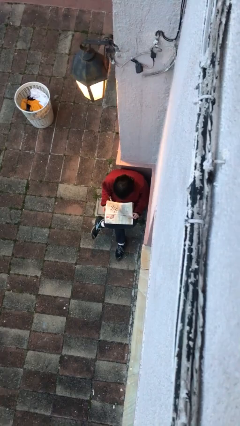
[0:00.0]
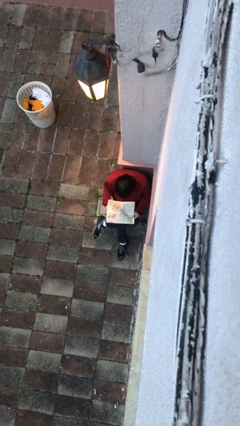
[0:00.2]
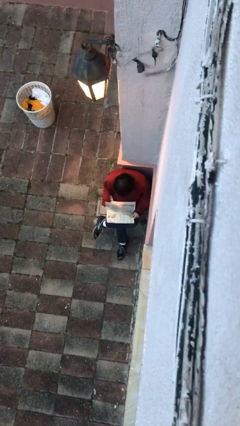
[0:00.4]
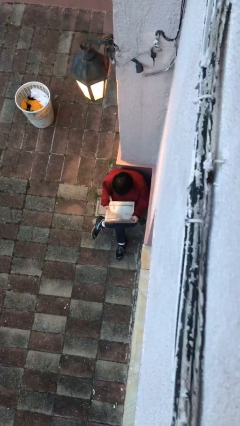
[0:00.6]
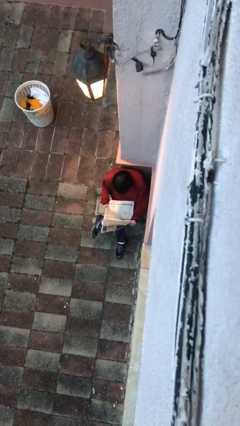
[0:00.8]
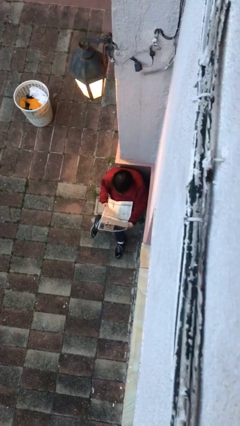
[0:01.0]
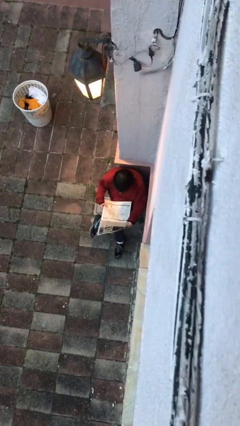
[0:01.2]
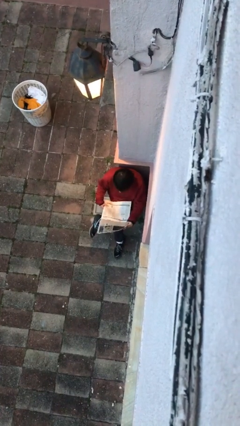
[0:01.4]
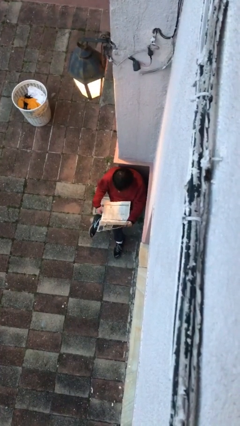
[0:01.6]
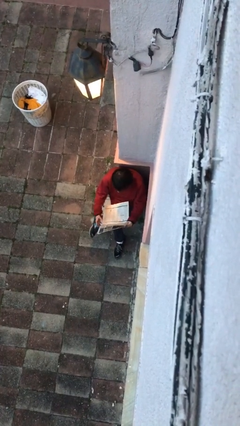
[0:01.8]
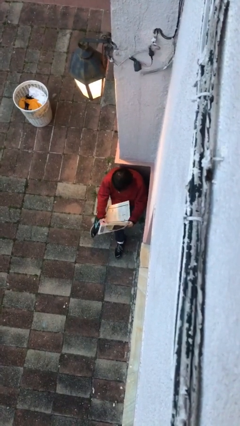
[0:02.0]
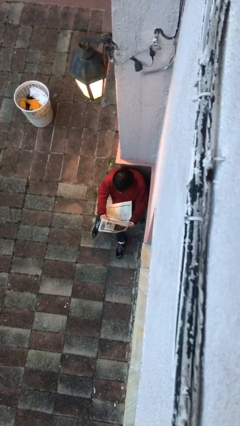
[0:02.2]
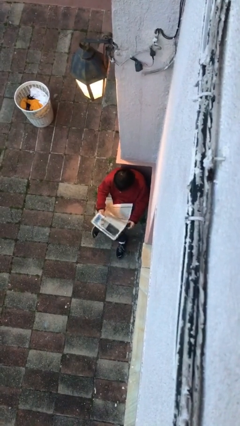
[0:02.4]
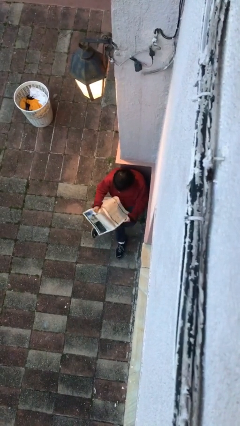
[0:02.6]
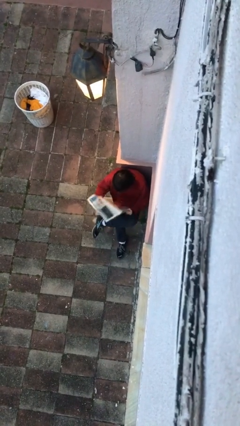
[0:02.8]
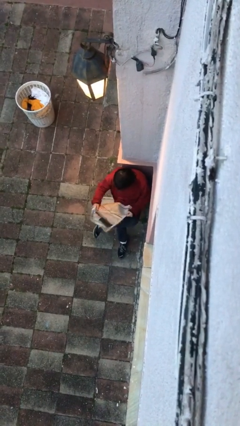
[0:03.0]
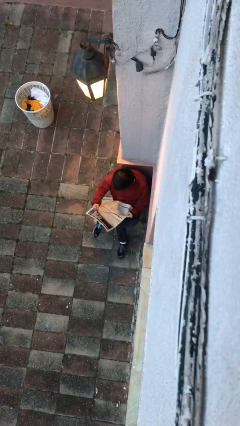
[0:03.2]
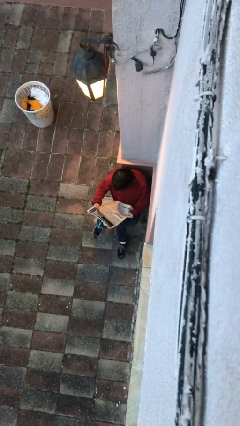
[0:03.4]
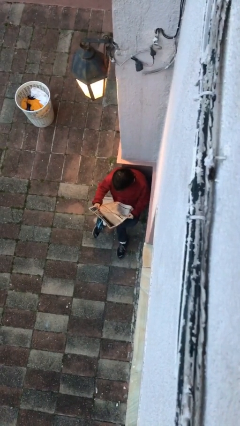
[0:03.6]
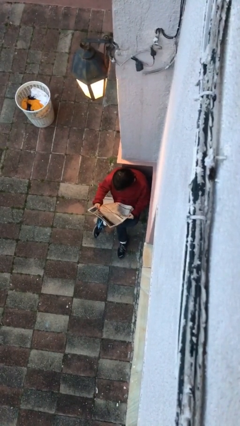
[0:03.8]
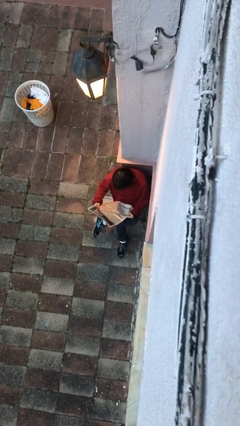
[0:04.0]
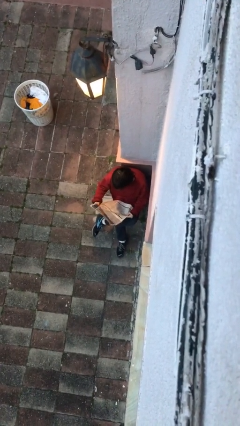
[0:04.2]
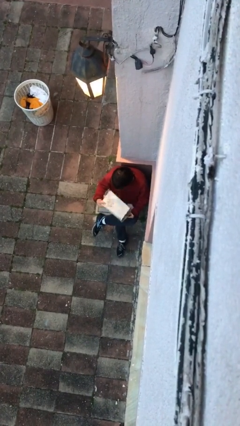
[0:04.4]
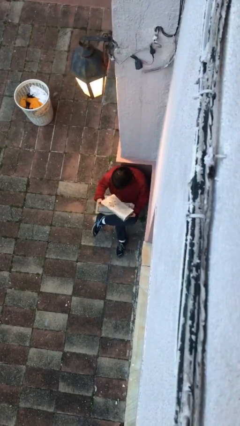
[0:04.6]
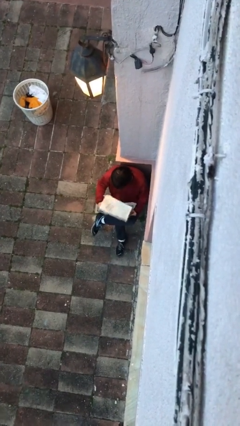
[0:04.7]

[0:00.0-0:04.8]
person reads newspaper

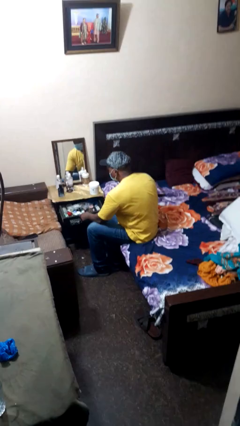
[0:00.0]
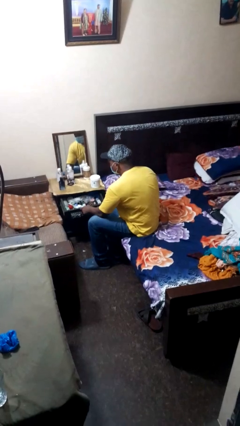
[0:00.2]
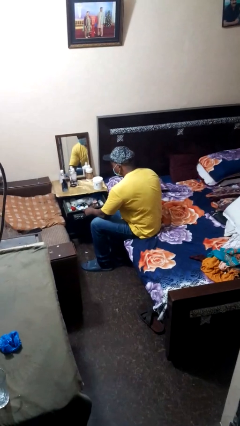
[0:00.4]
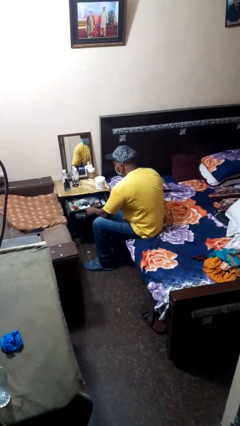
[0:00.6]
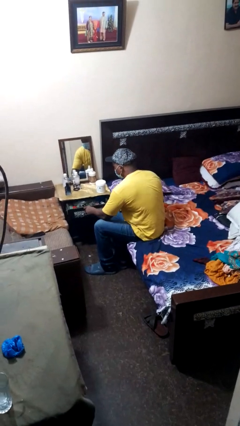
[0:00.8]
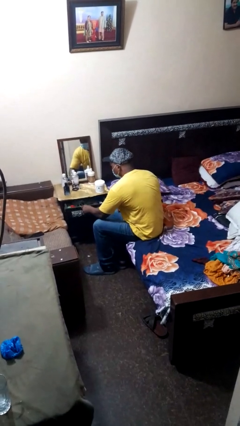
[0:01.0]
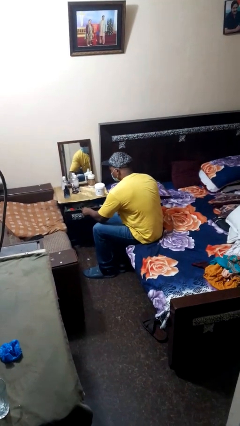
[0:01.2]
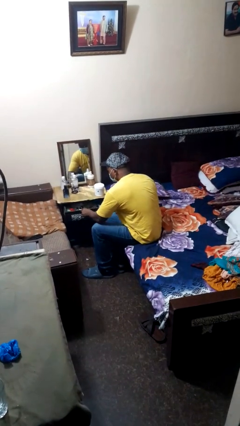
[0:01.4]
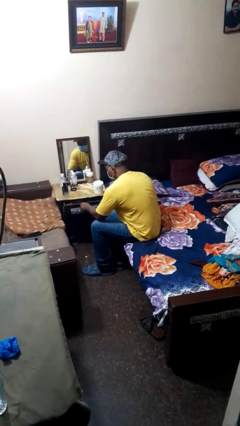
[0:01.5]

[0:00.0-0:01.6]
person closes dresser drawer

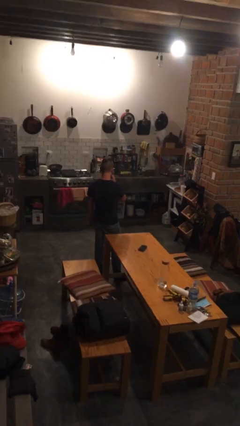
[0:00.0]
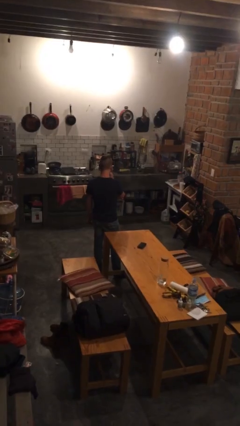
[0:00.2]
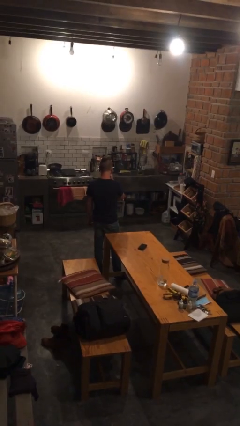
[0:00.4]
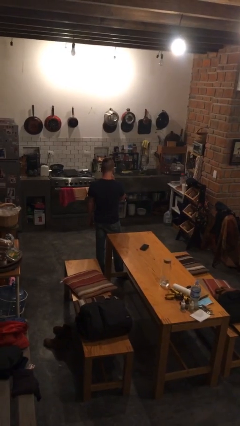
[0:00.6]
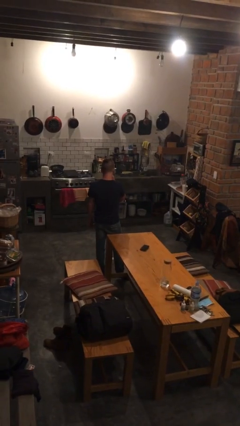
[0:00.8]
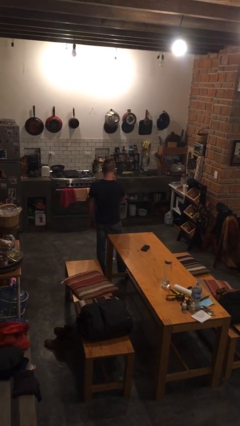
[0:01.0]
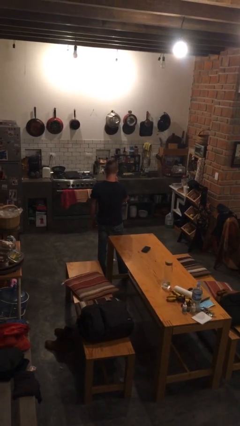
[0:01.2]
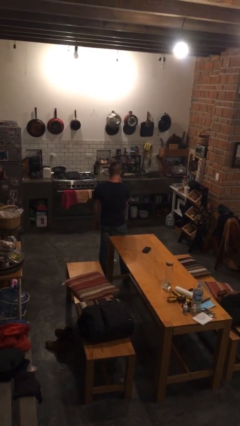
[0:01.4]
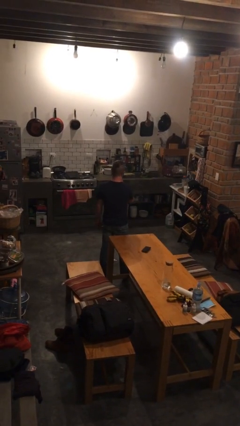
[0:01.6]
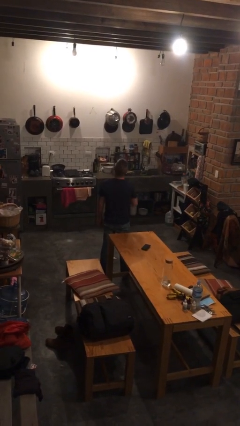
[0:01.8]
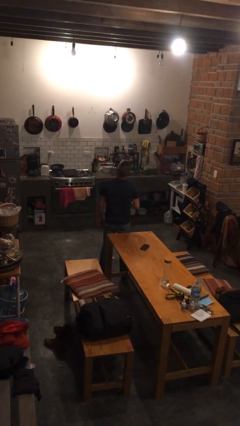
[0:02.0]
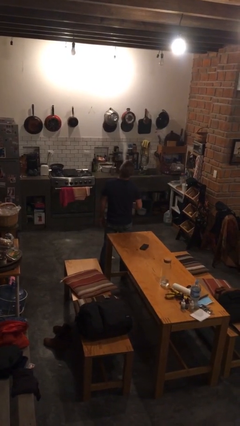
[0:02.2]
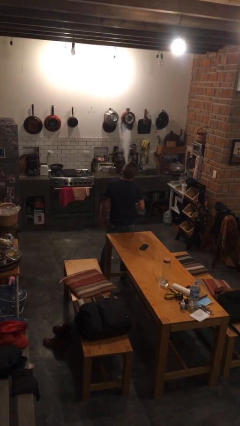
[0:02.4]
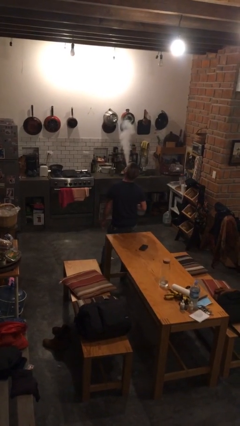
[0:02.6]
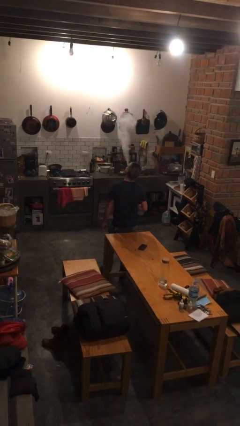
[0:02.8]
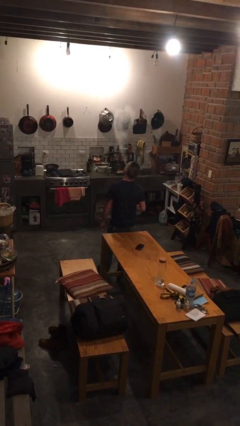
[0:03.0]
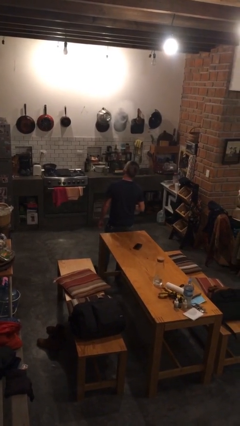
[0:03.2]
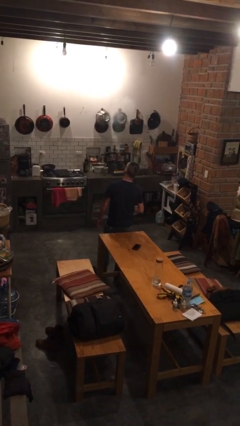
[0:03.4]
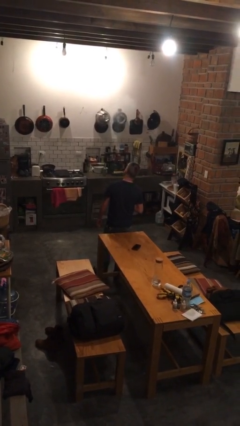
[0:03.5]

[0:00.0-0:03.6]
person vapes

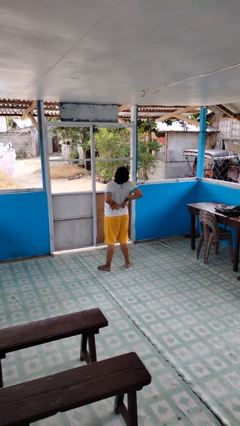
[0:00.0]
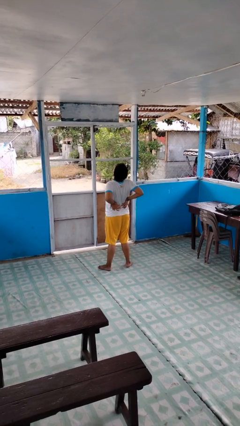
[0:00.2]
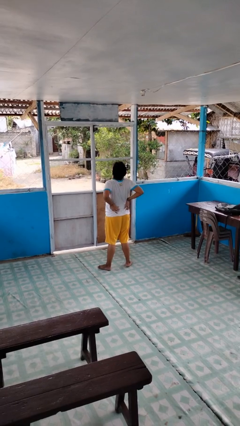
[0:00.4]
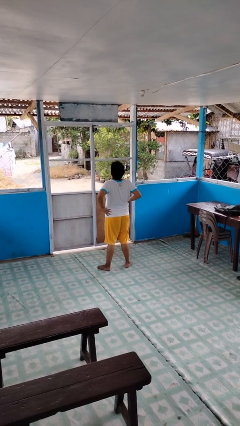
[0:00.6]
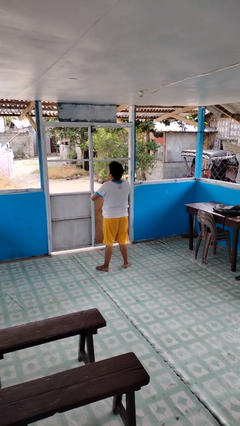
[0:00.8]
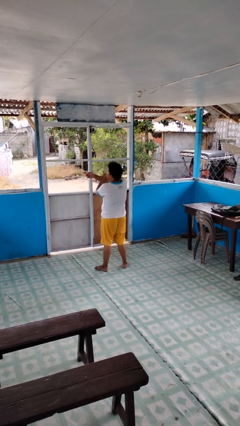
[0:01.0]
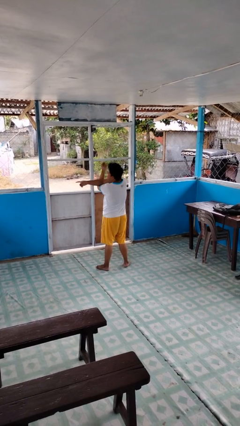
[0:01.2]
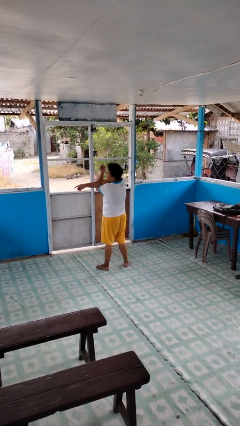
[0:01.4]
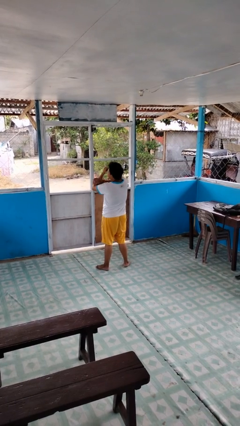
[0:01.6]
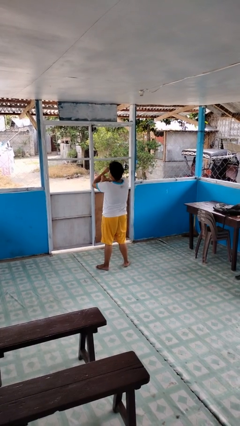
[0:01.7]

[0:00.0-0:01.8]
person stretches arms to side

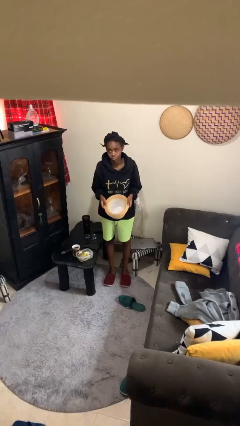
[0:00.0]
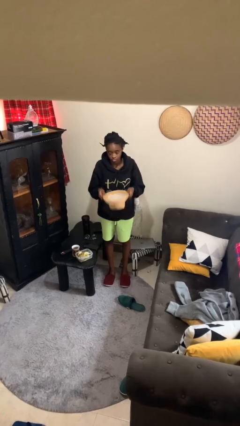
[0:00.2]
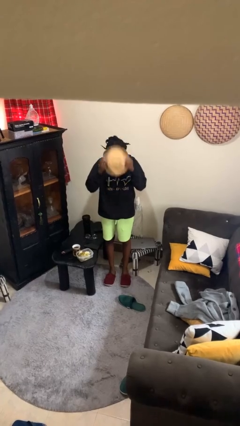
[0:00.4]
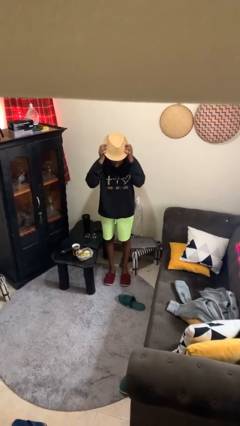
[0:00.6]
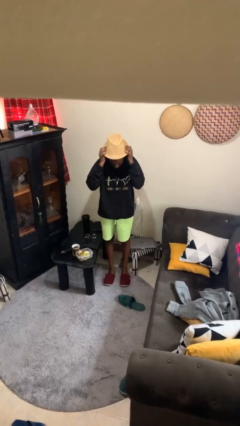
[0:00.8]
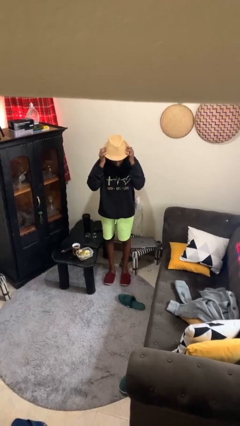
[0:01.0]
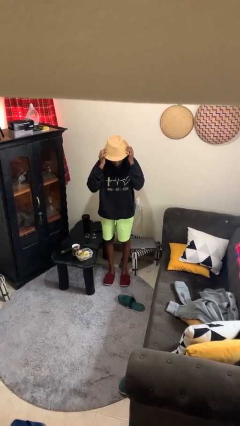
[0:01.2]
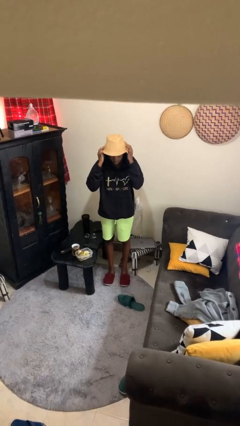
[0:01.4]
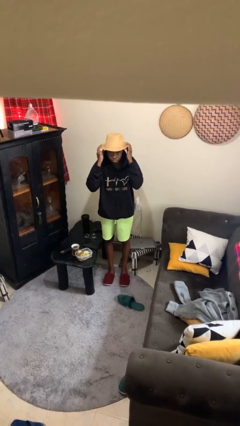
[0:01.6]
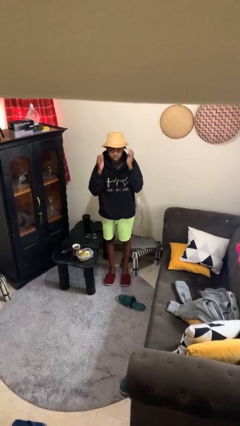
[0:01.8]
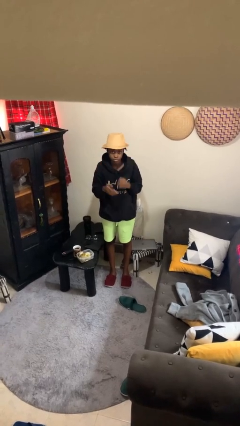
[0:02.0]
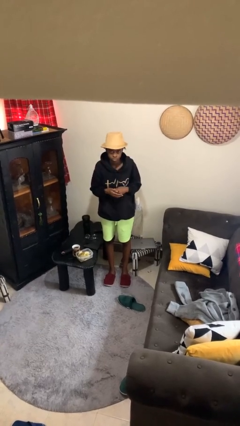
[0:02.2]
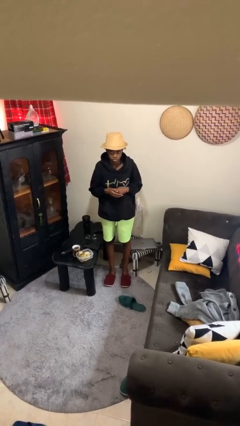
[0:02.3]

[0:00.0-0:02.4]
person puts on hat

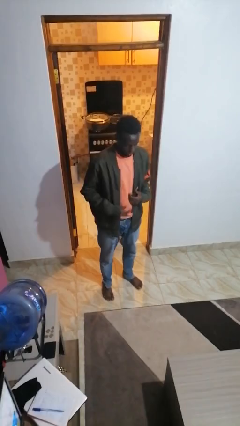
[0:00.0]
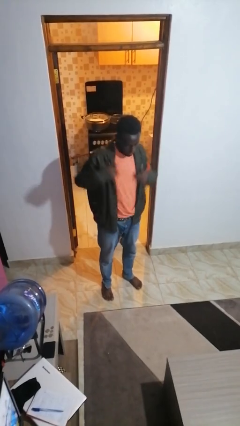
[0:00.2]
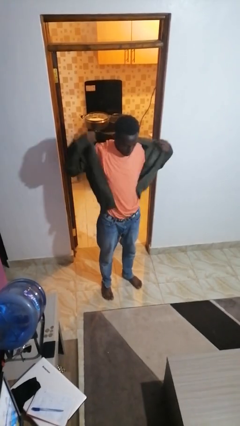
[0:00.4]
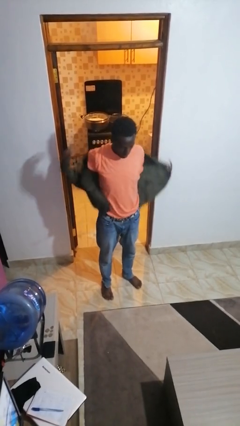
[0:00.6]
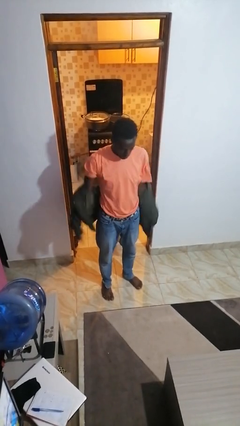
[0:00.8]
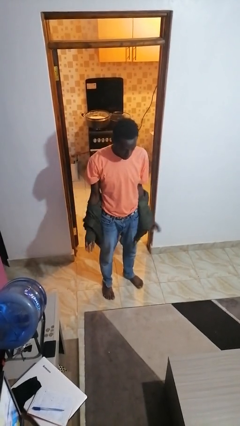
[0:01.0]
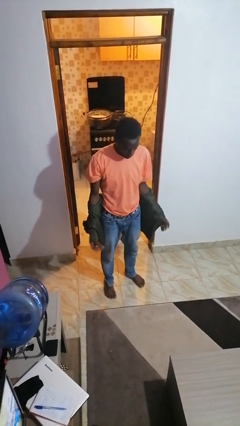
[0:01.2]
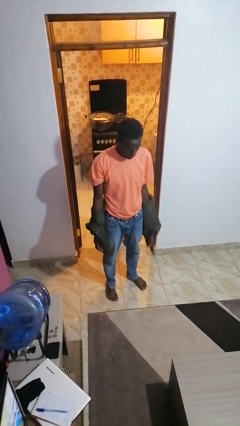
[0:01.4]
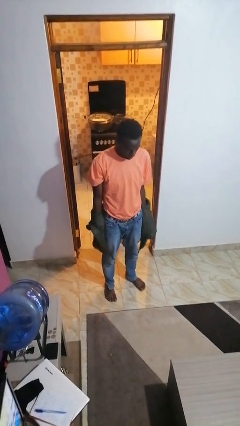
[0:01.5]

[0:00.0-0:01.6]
person takes off jacket

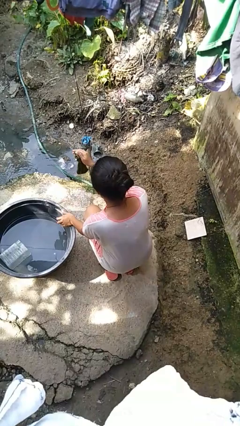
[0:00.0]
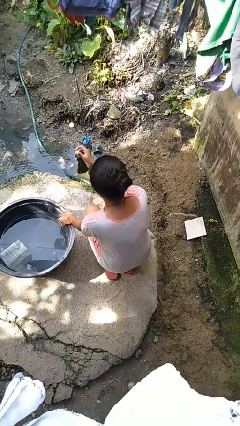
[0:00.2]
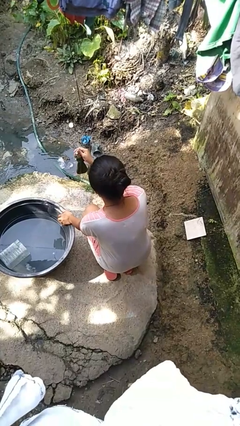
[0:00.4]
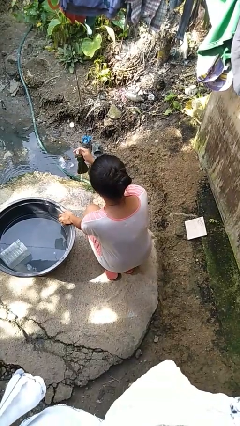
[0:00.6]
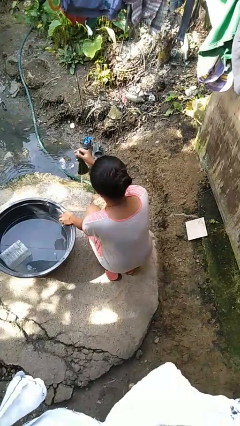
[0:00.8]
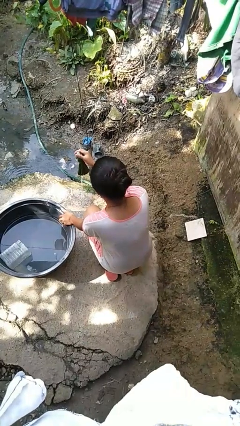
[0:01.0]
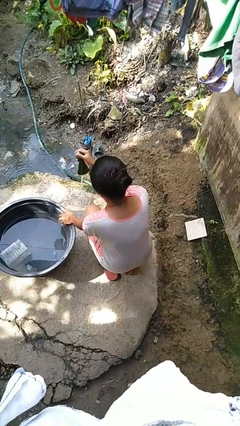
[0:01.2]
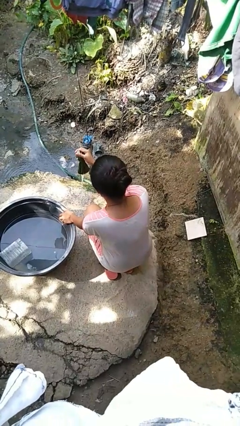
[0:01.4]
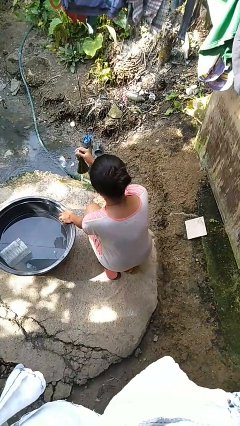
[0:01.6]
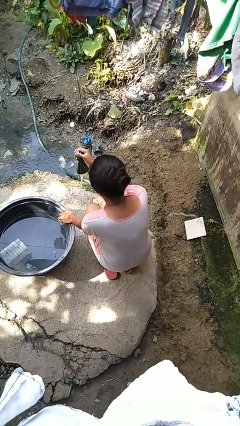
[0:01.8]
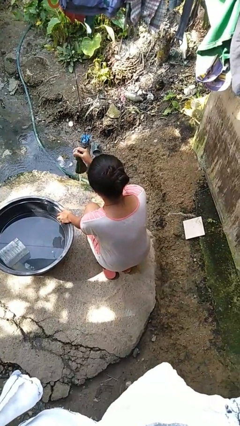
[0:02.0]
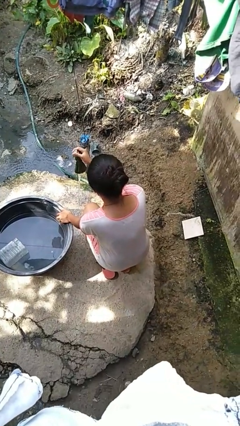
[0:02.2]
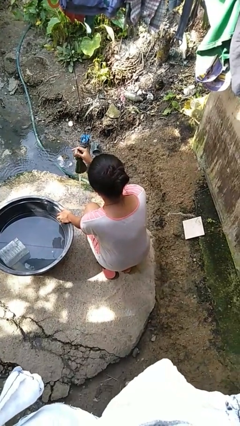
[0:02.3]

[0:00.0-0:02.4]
person turns on faucet
